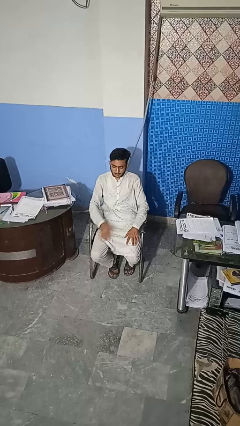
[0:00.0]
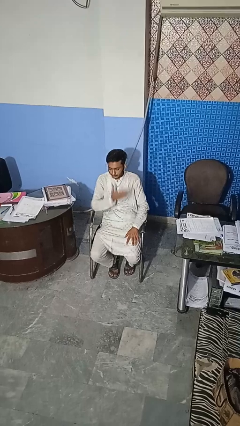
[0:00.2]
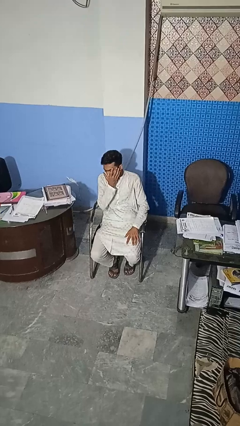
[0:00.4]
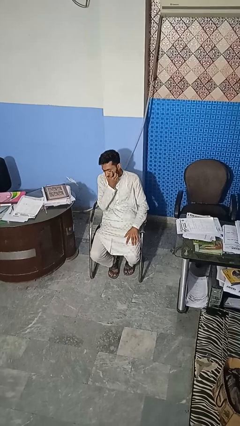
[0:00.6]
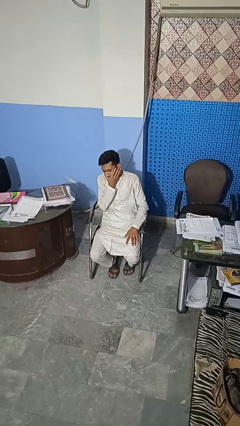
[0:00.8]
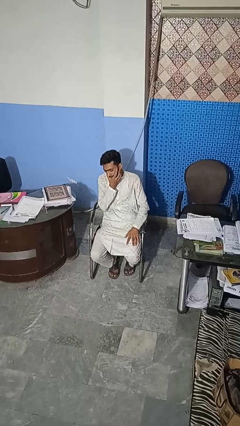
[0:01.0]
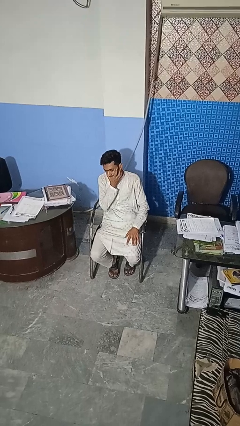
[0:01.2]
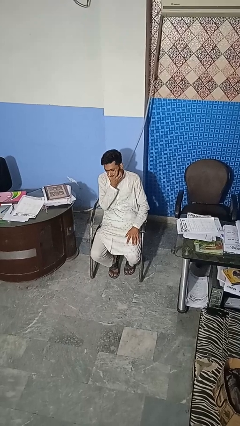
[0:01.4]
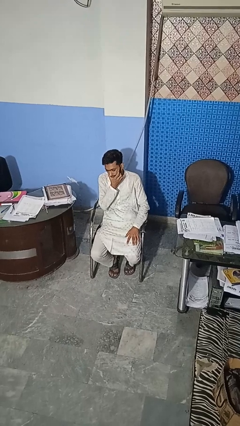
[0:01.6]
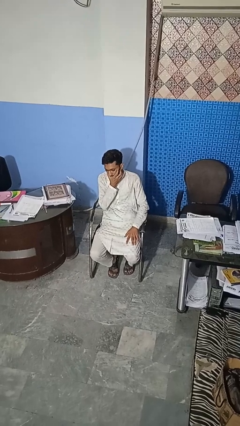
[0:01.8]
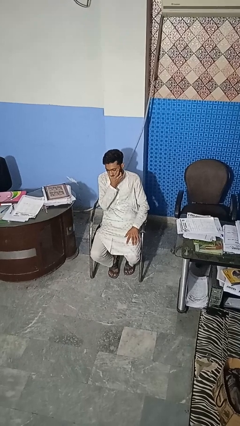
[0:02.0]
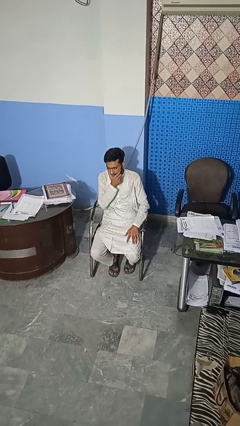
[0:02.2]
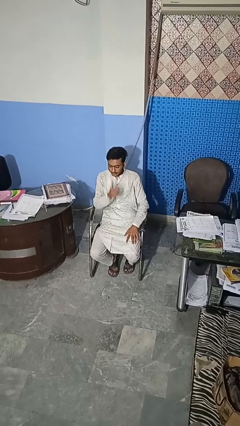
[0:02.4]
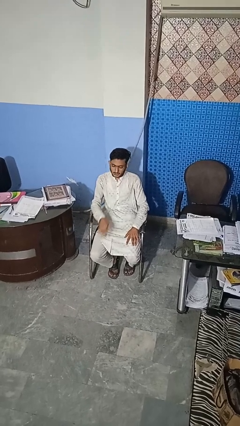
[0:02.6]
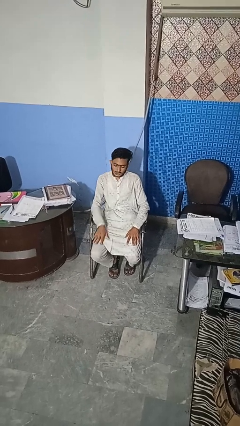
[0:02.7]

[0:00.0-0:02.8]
person scratches face

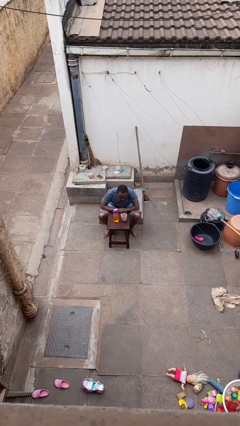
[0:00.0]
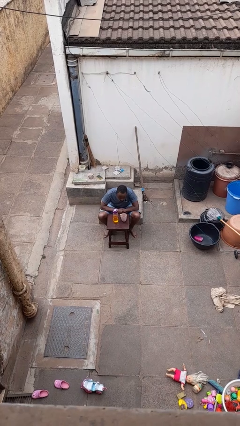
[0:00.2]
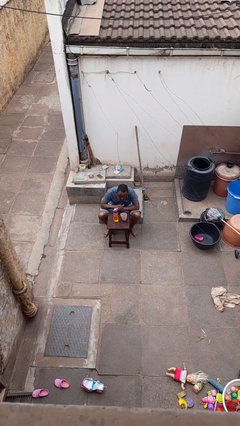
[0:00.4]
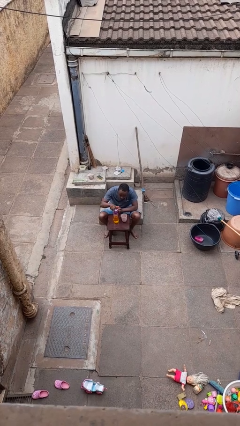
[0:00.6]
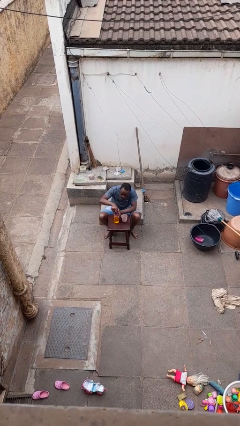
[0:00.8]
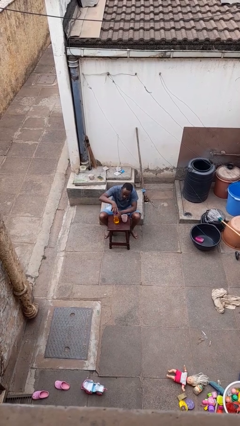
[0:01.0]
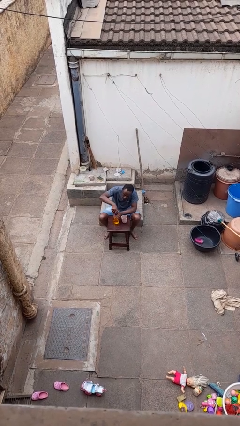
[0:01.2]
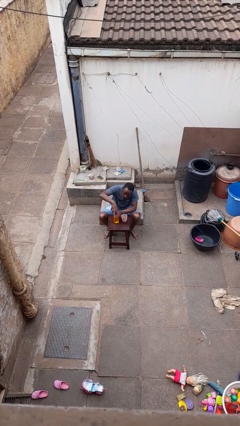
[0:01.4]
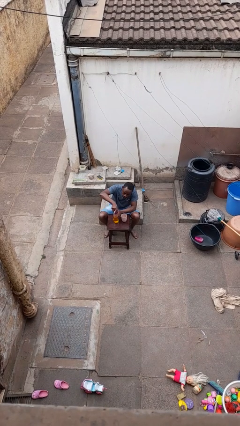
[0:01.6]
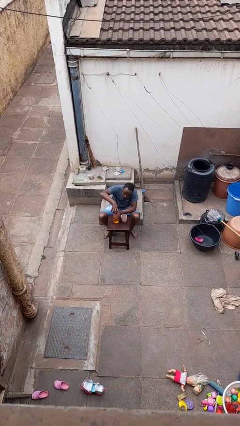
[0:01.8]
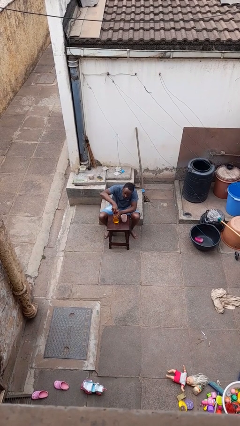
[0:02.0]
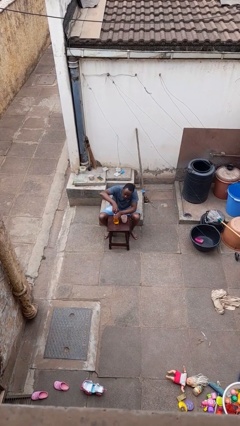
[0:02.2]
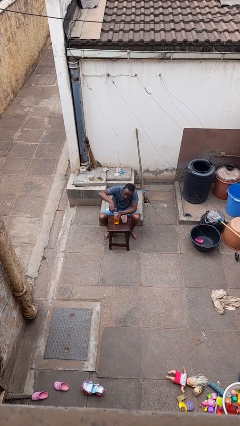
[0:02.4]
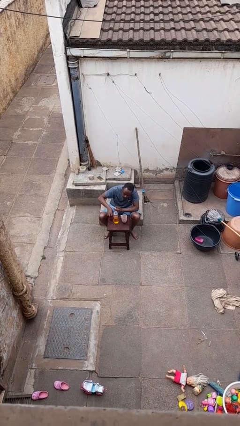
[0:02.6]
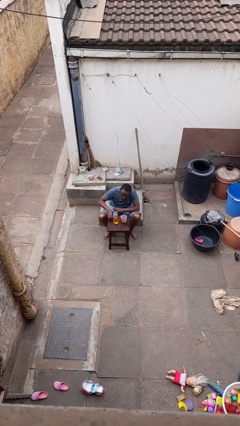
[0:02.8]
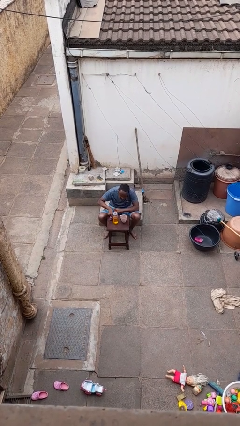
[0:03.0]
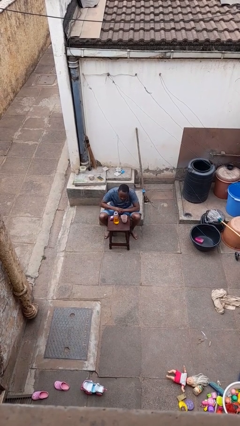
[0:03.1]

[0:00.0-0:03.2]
person unscrews lid from bottle

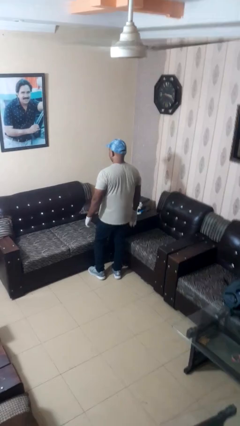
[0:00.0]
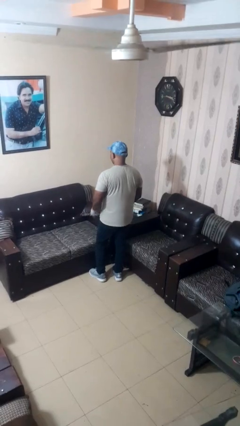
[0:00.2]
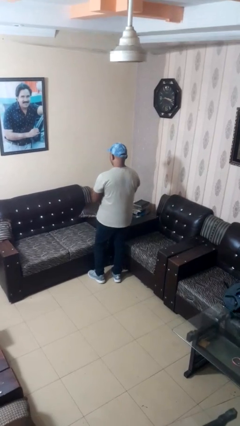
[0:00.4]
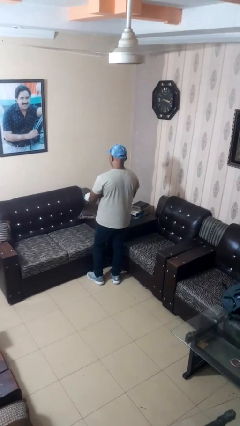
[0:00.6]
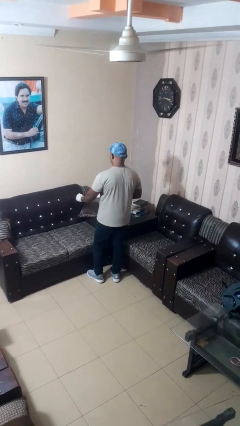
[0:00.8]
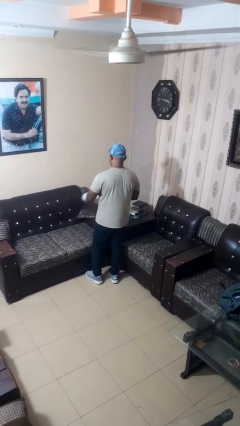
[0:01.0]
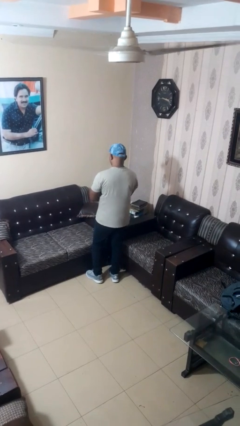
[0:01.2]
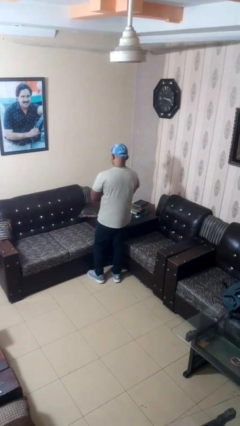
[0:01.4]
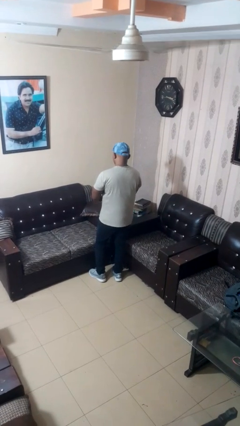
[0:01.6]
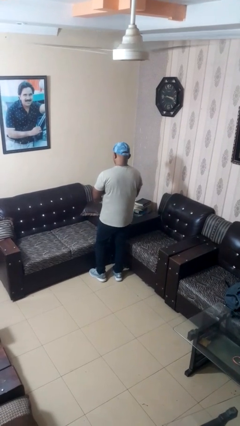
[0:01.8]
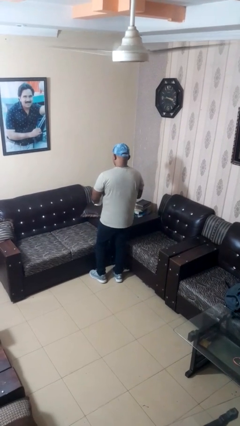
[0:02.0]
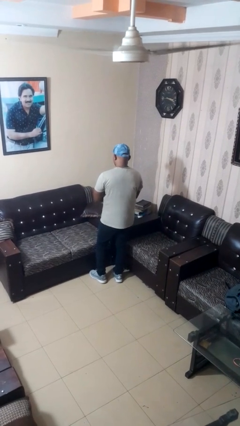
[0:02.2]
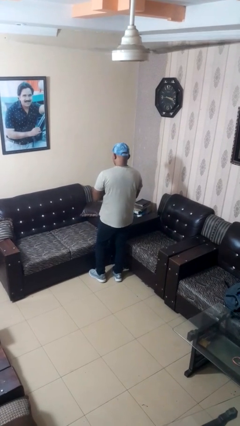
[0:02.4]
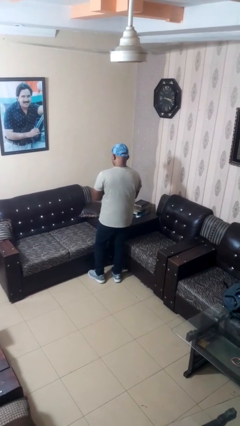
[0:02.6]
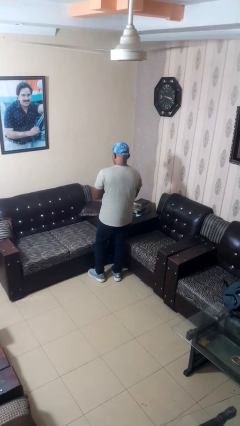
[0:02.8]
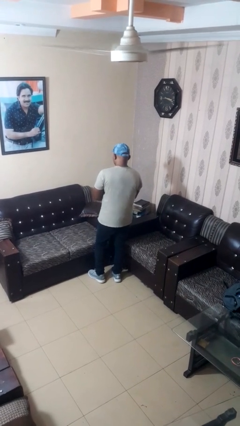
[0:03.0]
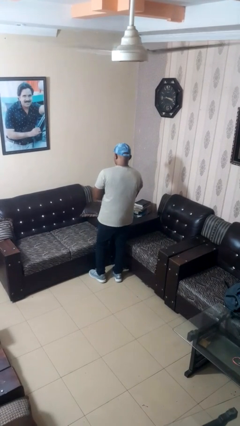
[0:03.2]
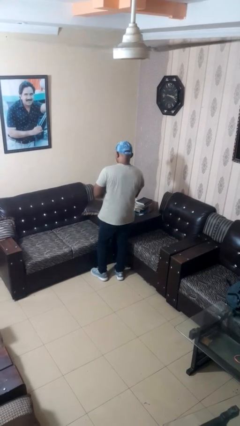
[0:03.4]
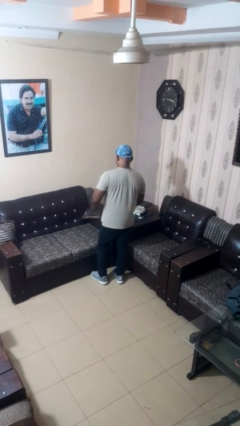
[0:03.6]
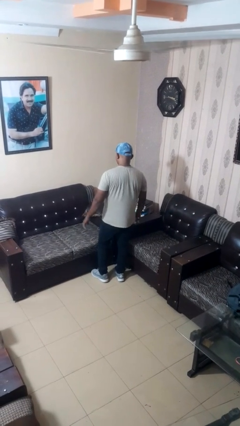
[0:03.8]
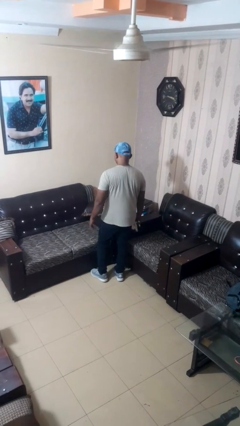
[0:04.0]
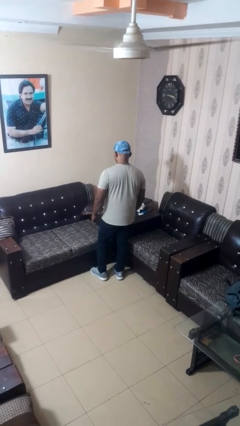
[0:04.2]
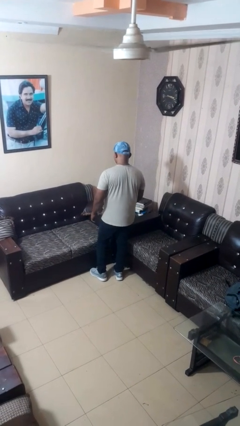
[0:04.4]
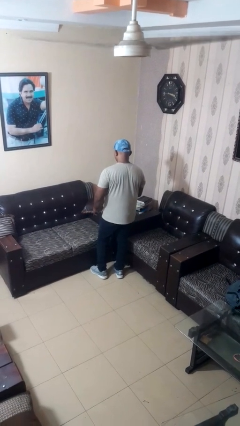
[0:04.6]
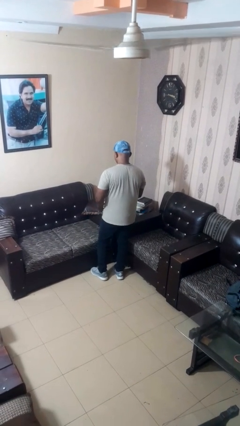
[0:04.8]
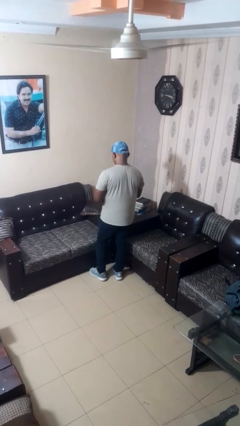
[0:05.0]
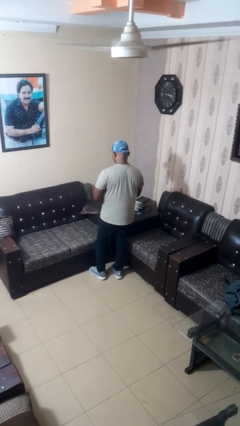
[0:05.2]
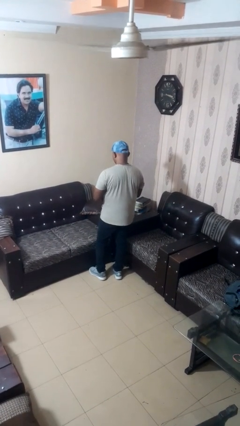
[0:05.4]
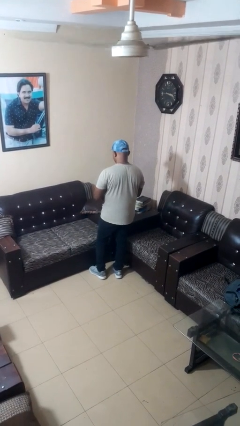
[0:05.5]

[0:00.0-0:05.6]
person takes off gloves

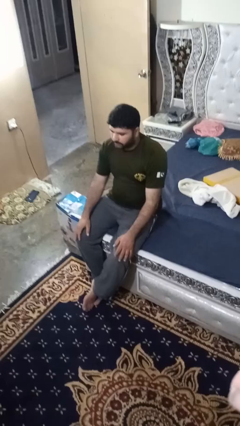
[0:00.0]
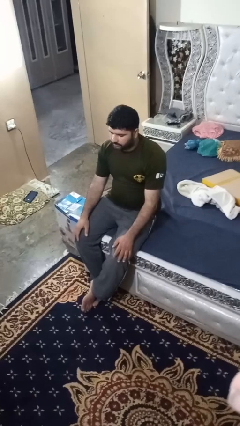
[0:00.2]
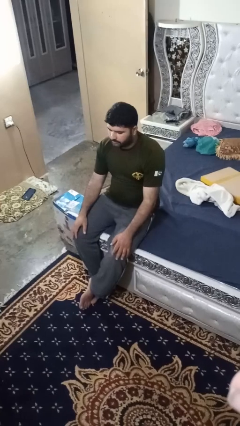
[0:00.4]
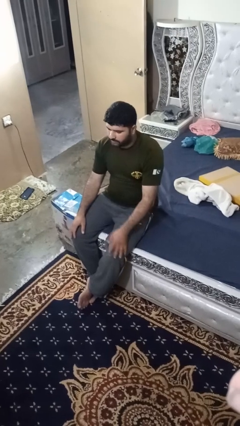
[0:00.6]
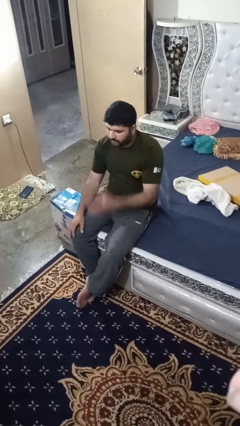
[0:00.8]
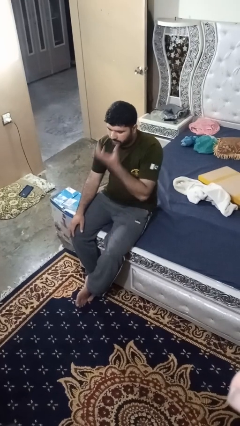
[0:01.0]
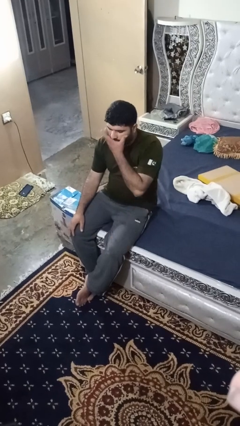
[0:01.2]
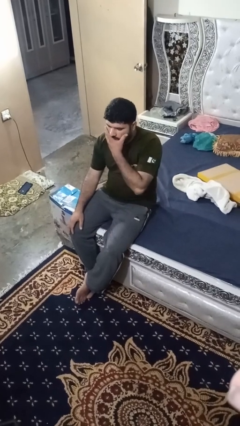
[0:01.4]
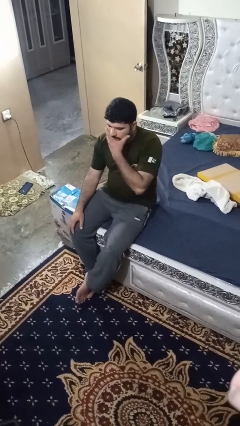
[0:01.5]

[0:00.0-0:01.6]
person strokes chin

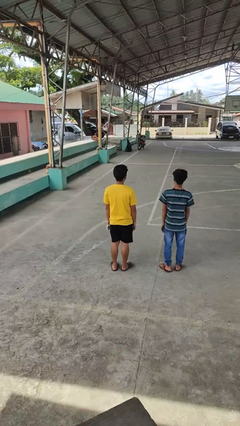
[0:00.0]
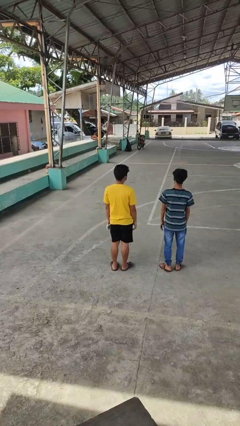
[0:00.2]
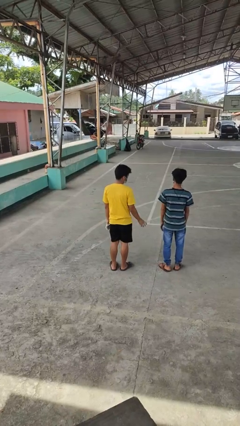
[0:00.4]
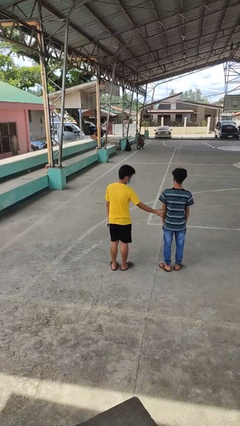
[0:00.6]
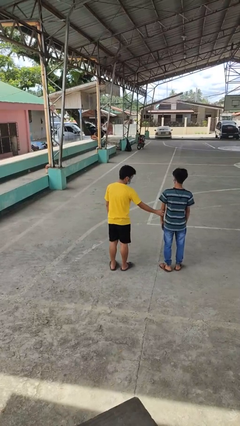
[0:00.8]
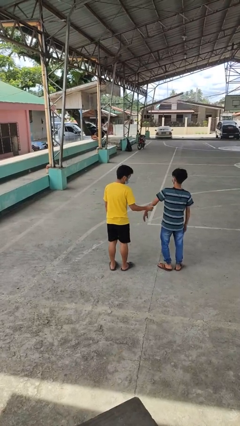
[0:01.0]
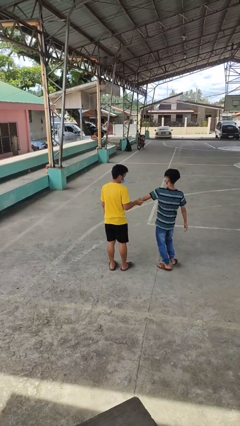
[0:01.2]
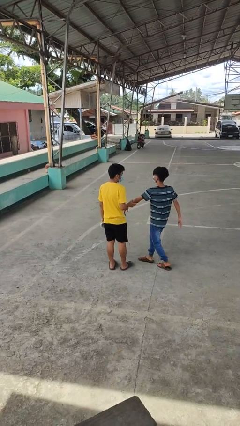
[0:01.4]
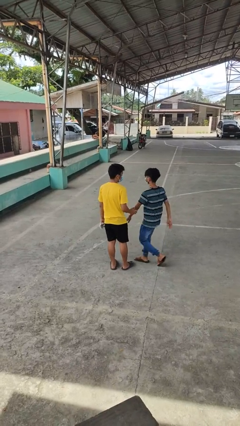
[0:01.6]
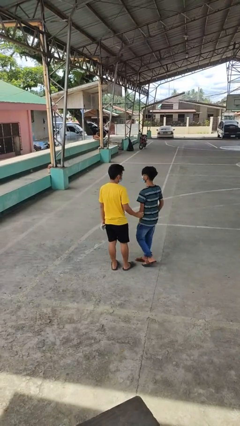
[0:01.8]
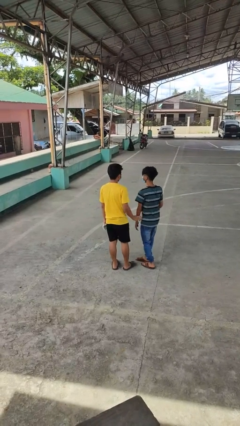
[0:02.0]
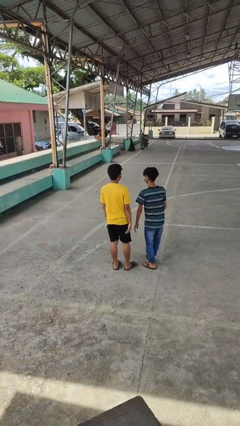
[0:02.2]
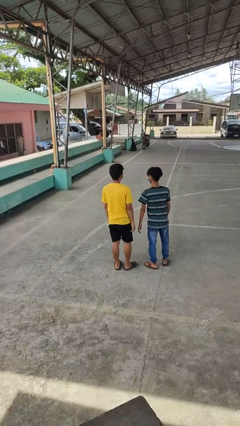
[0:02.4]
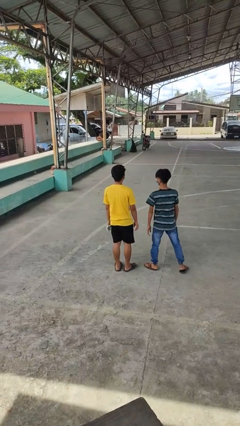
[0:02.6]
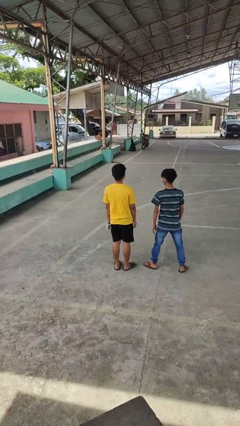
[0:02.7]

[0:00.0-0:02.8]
person grabs person by forearm

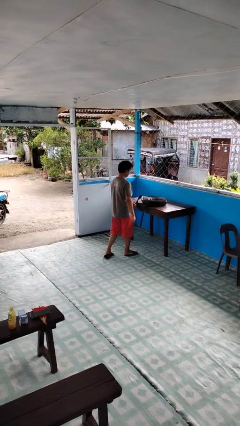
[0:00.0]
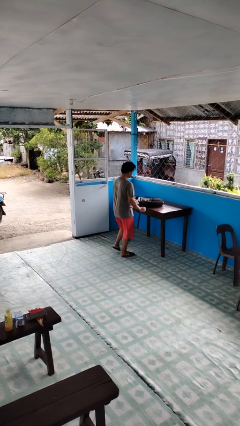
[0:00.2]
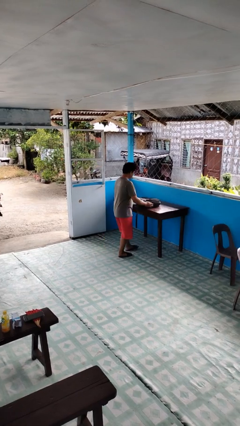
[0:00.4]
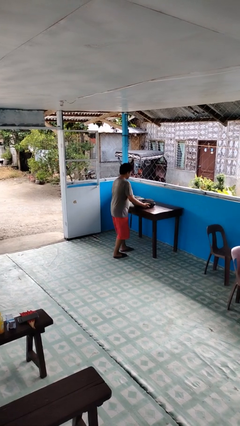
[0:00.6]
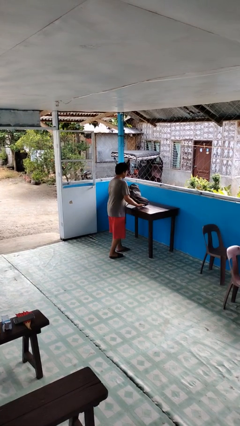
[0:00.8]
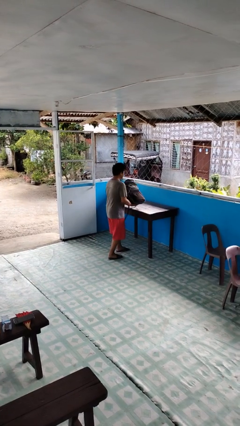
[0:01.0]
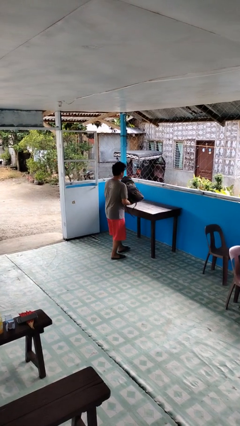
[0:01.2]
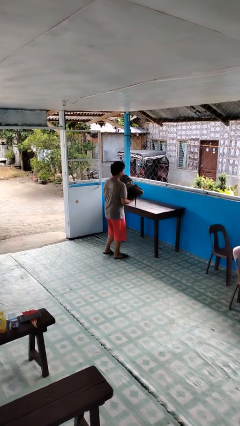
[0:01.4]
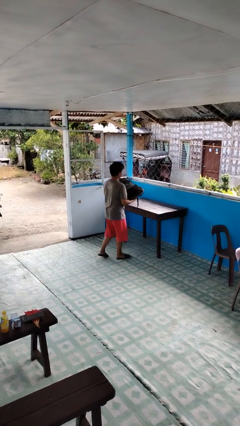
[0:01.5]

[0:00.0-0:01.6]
person picks up object from table
